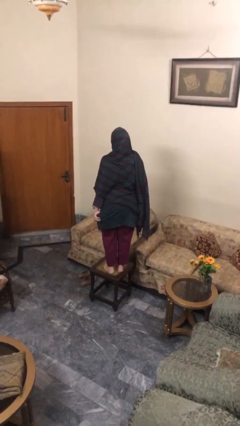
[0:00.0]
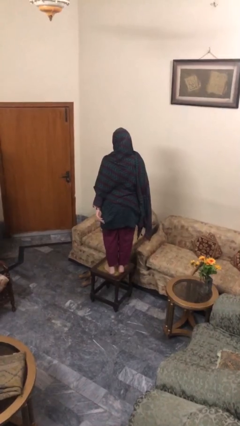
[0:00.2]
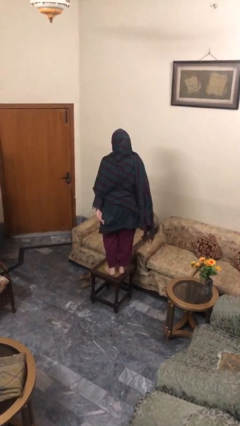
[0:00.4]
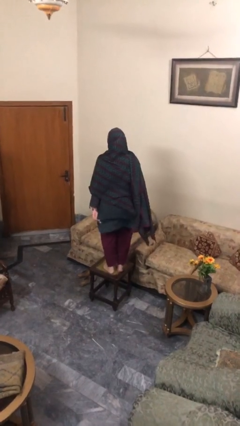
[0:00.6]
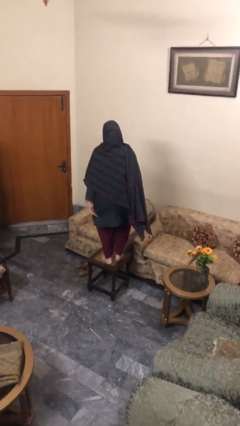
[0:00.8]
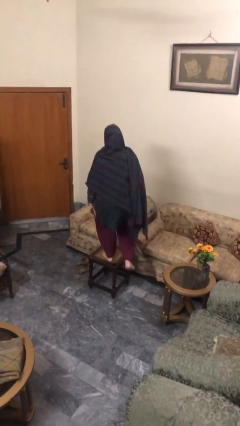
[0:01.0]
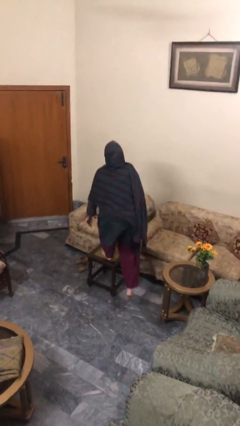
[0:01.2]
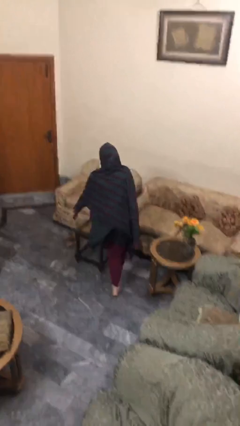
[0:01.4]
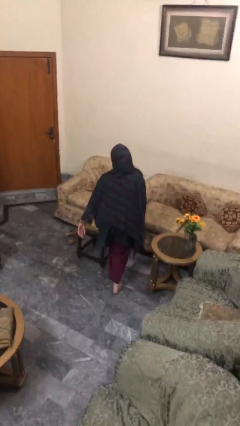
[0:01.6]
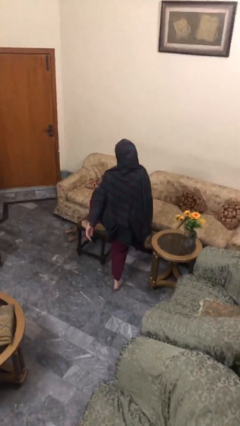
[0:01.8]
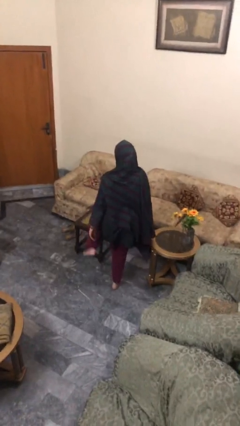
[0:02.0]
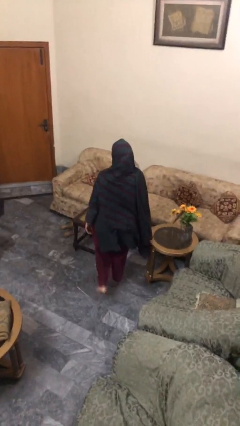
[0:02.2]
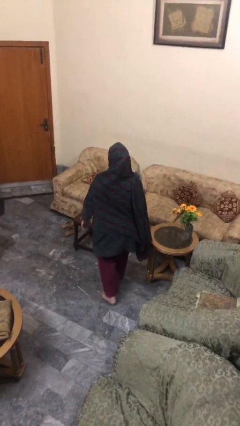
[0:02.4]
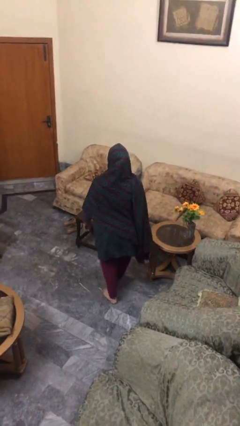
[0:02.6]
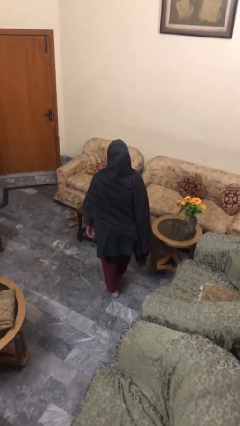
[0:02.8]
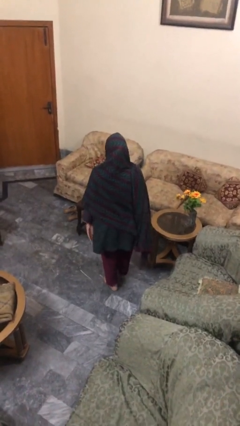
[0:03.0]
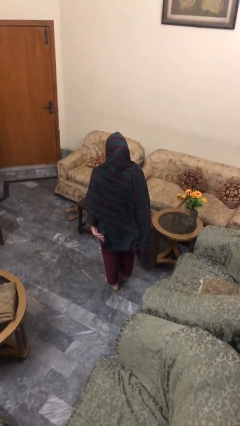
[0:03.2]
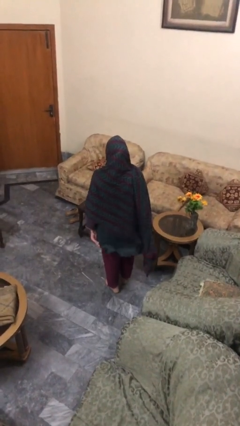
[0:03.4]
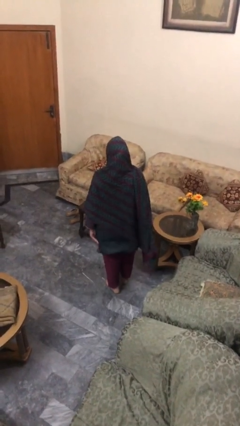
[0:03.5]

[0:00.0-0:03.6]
person climbs off table

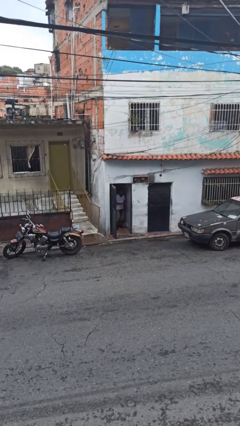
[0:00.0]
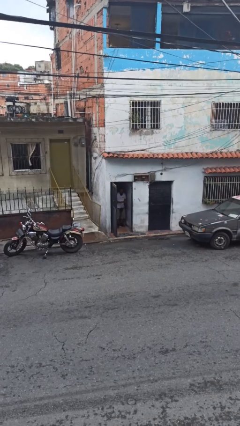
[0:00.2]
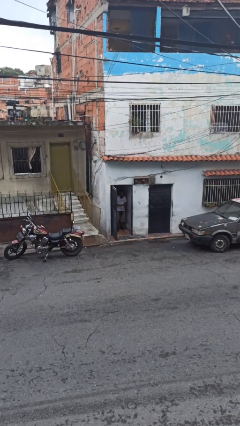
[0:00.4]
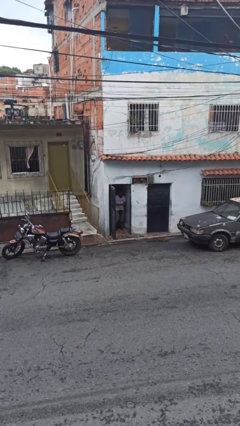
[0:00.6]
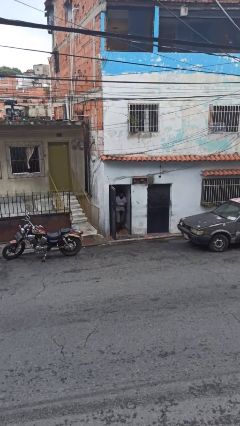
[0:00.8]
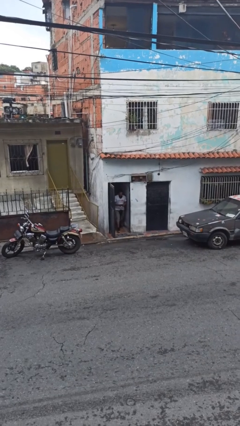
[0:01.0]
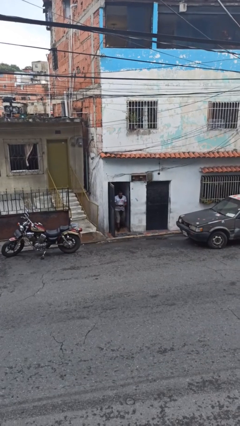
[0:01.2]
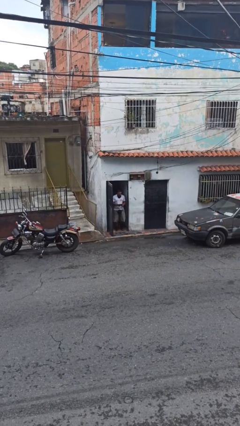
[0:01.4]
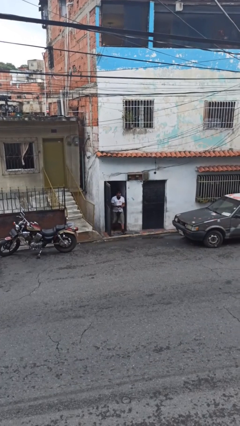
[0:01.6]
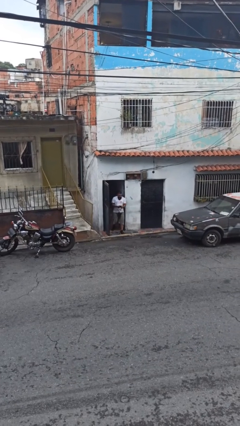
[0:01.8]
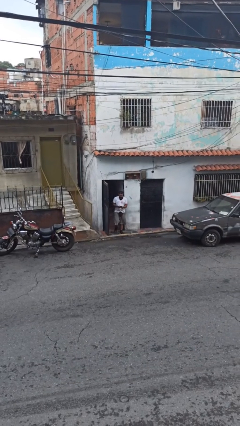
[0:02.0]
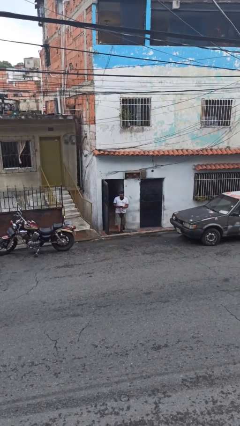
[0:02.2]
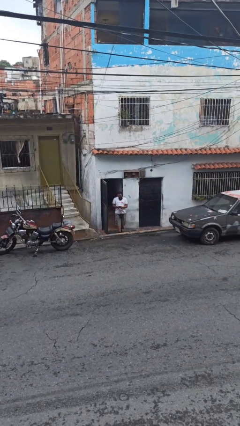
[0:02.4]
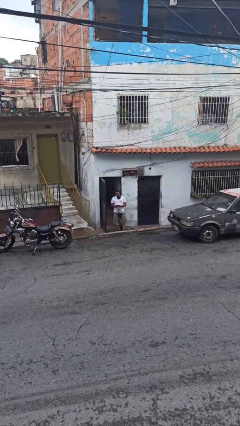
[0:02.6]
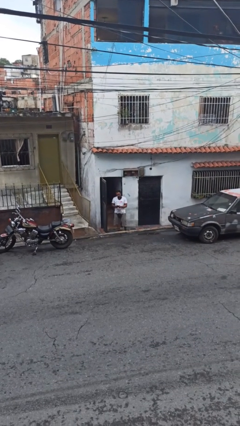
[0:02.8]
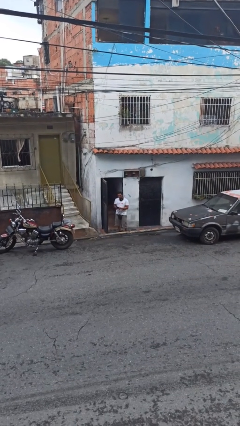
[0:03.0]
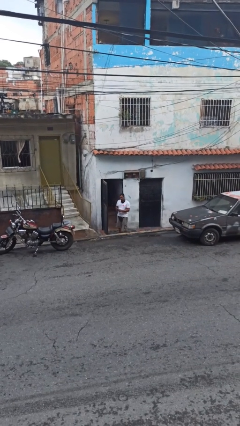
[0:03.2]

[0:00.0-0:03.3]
person enters scene through structure

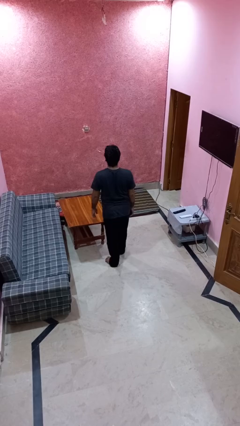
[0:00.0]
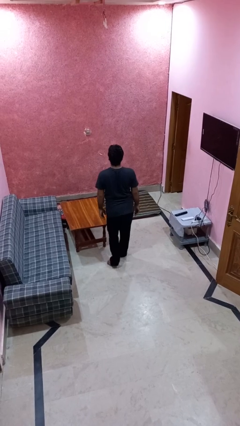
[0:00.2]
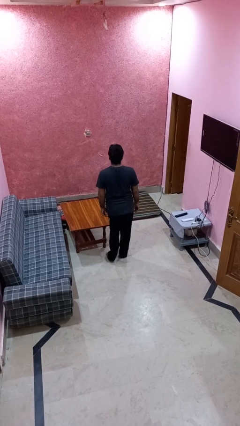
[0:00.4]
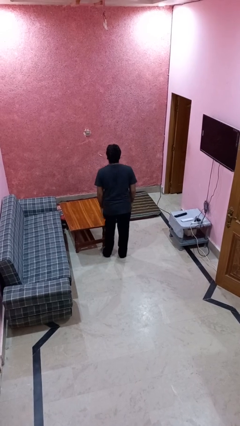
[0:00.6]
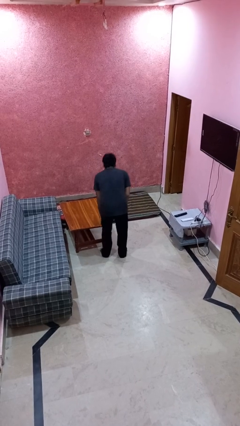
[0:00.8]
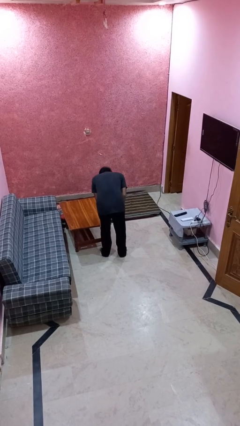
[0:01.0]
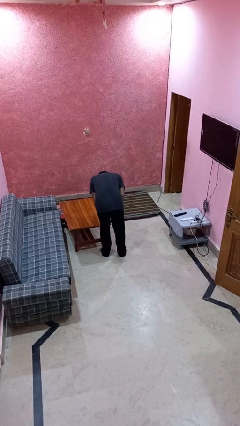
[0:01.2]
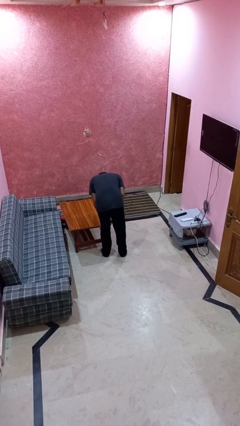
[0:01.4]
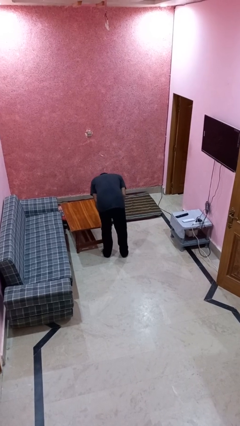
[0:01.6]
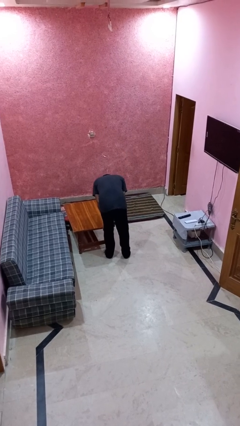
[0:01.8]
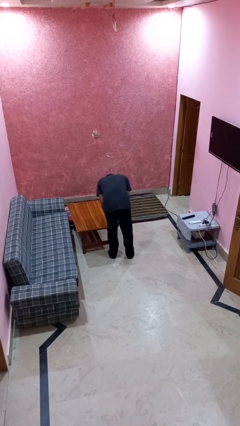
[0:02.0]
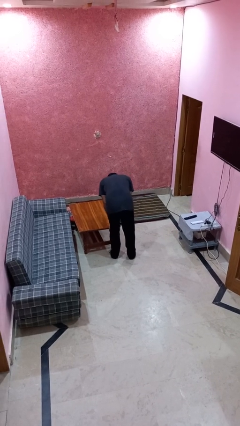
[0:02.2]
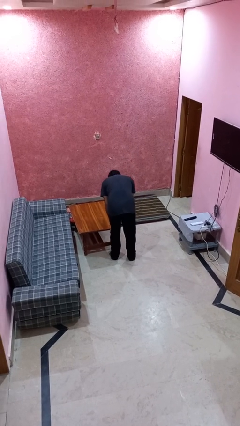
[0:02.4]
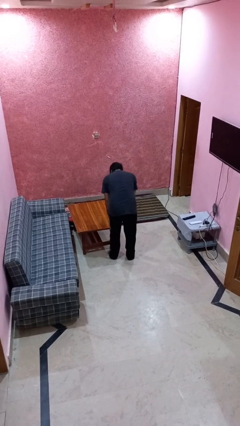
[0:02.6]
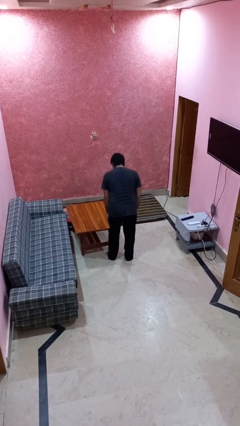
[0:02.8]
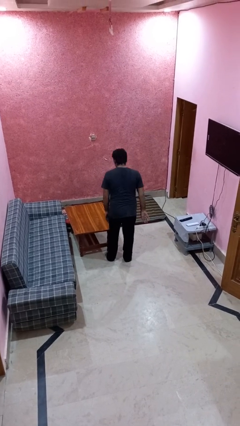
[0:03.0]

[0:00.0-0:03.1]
person bumps into table

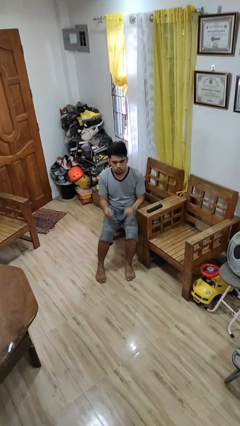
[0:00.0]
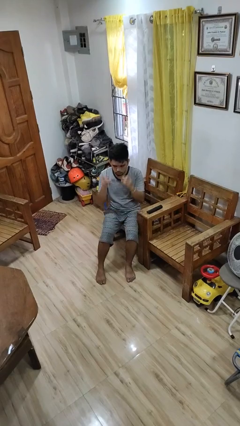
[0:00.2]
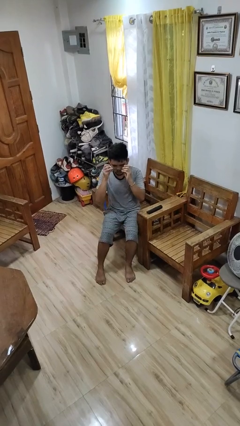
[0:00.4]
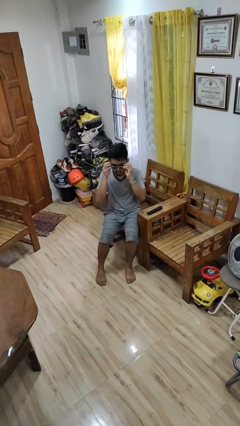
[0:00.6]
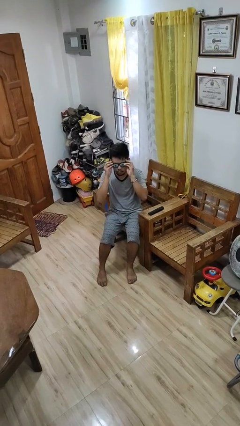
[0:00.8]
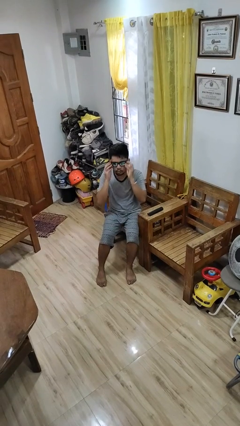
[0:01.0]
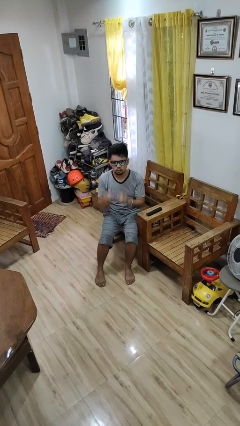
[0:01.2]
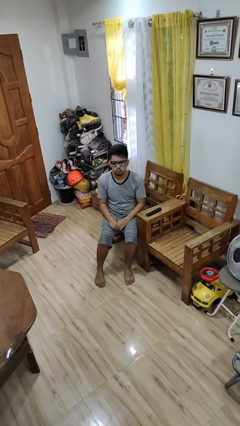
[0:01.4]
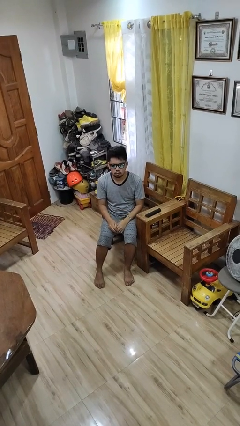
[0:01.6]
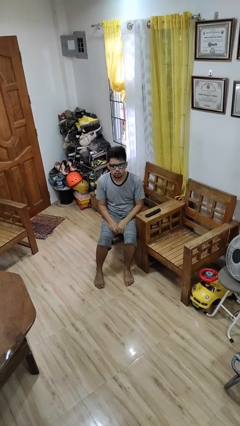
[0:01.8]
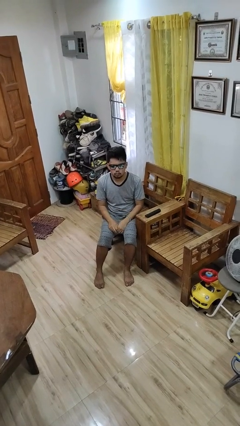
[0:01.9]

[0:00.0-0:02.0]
person puts on sunglasses

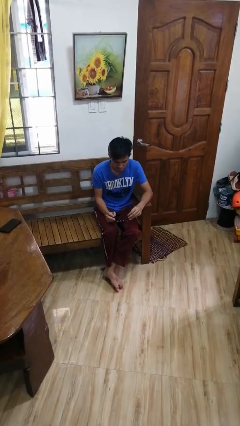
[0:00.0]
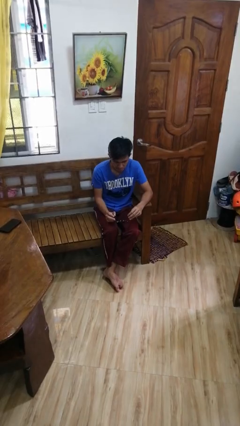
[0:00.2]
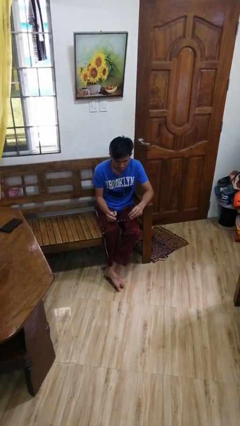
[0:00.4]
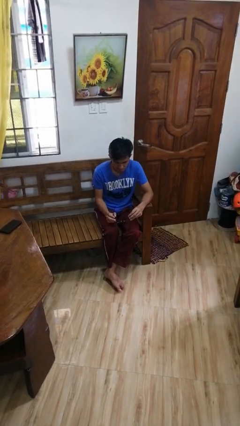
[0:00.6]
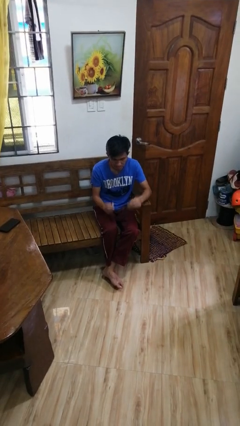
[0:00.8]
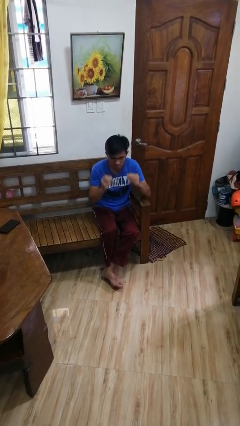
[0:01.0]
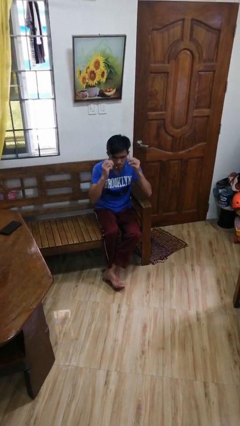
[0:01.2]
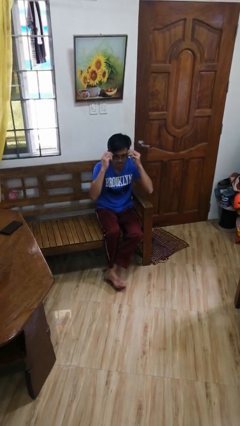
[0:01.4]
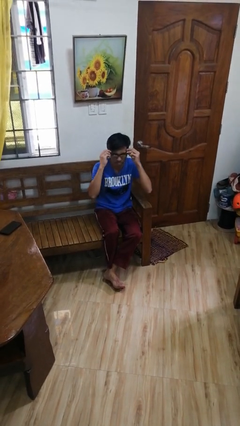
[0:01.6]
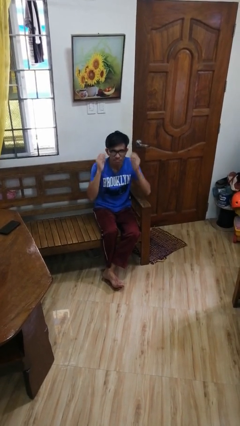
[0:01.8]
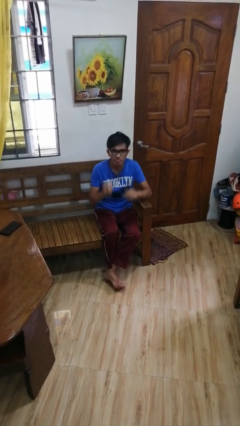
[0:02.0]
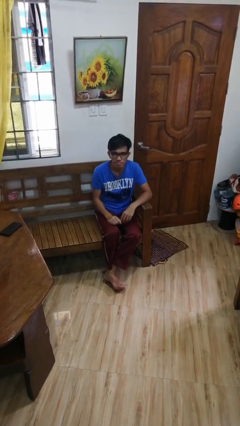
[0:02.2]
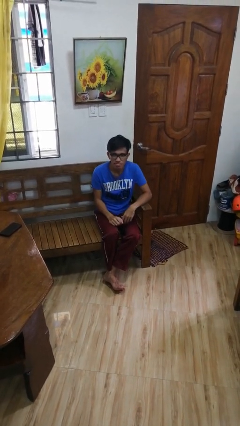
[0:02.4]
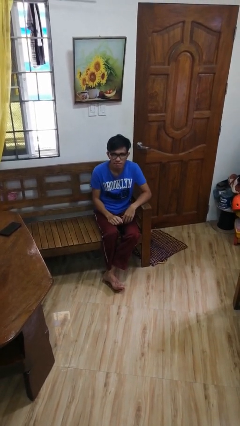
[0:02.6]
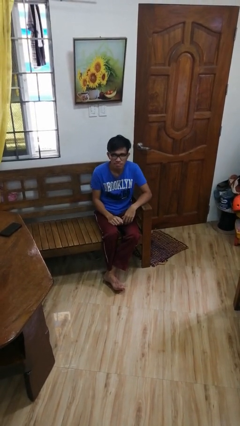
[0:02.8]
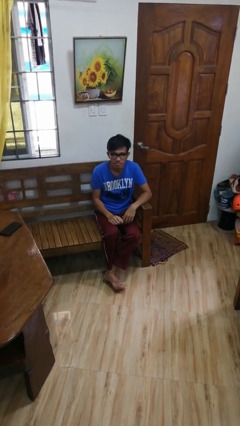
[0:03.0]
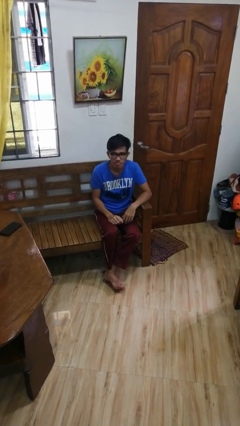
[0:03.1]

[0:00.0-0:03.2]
person puts on glasses

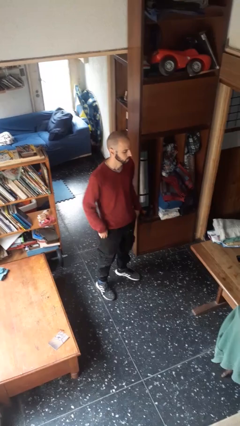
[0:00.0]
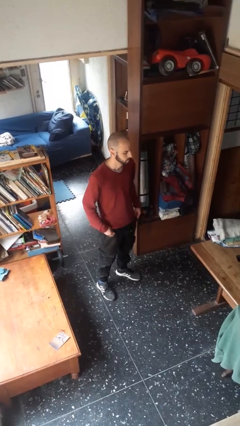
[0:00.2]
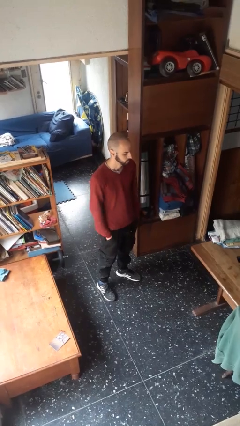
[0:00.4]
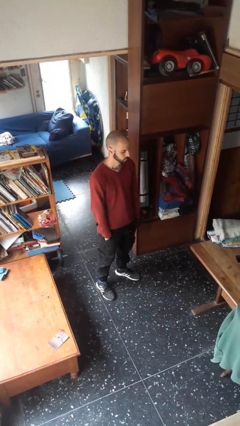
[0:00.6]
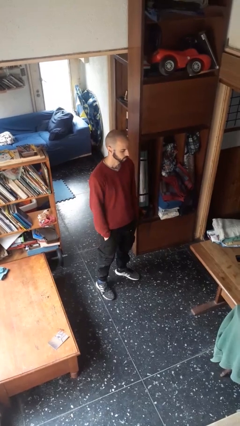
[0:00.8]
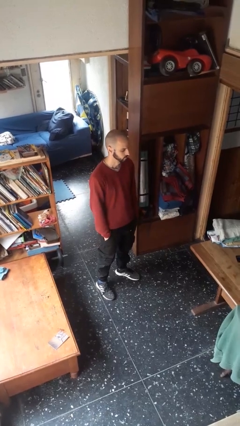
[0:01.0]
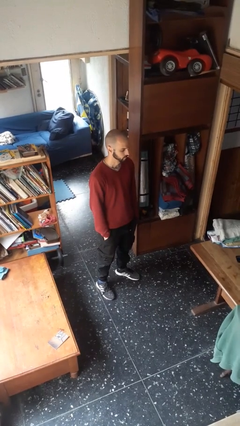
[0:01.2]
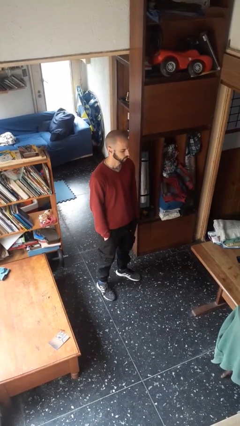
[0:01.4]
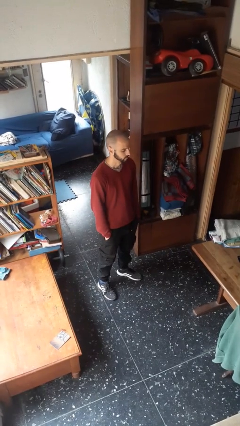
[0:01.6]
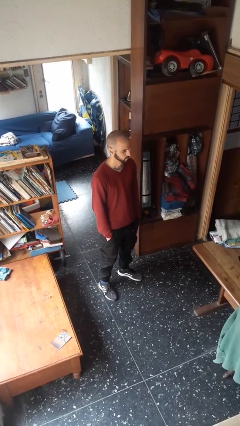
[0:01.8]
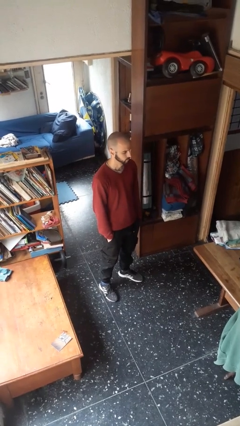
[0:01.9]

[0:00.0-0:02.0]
person puts hands in back pockets

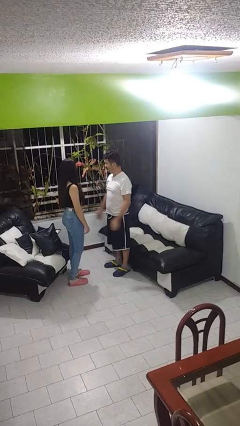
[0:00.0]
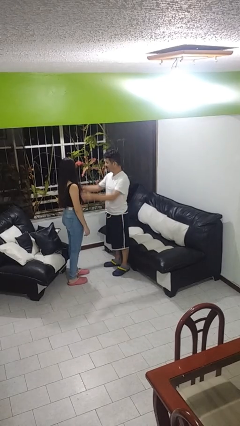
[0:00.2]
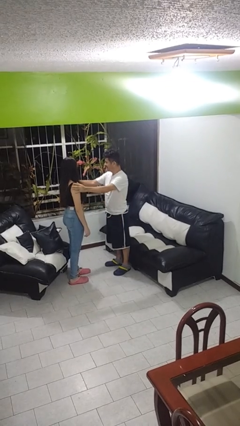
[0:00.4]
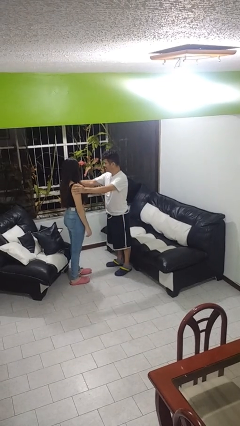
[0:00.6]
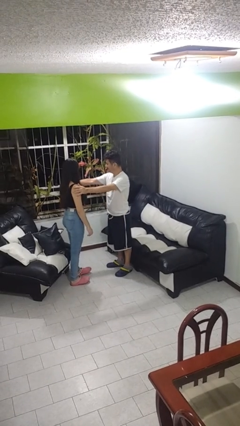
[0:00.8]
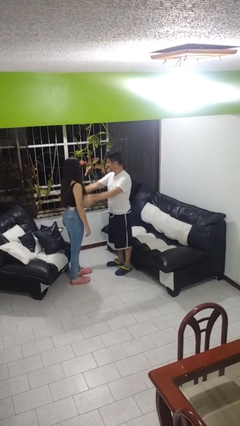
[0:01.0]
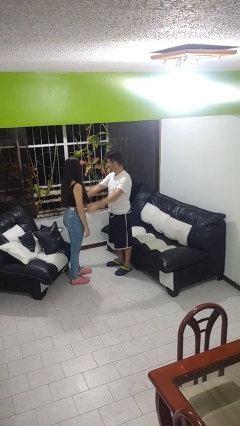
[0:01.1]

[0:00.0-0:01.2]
person shoves person
